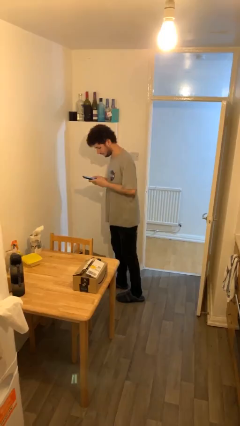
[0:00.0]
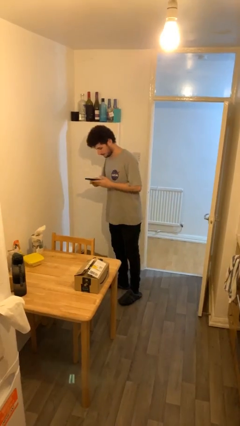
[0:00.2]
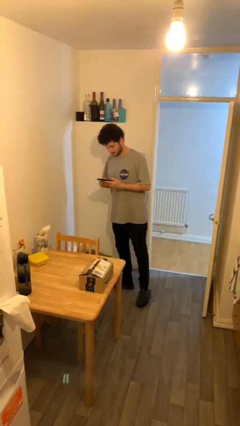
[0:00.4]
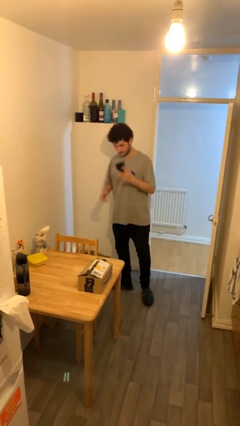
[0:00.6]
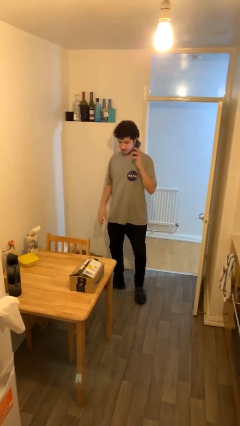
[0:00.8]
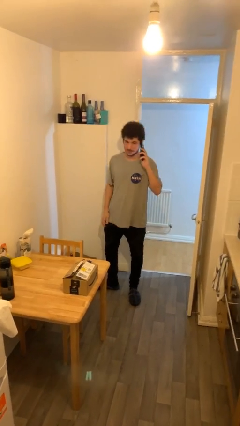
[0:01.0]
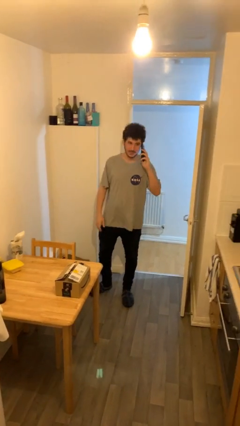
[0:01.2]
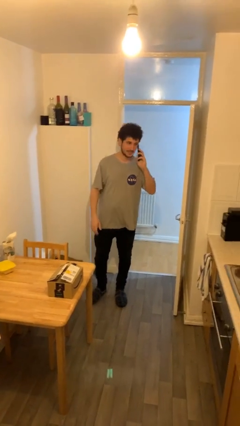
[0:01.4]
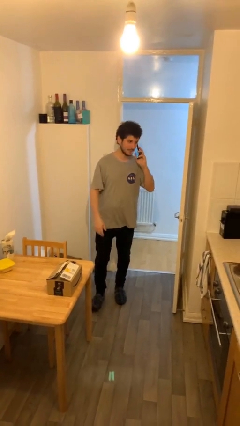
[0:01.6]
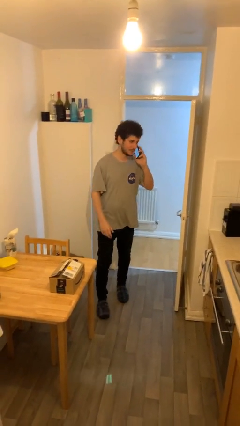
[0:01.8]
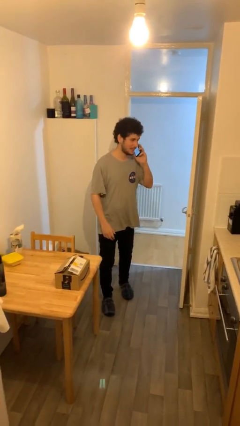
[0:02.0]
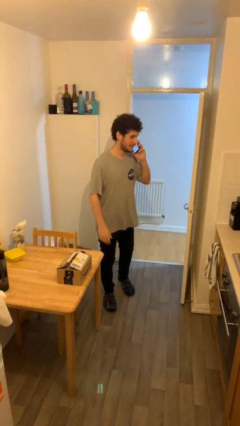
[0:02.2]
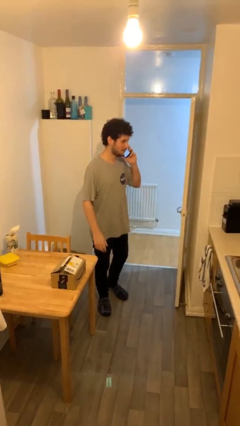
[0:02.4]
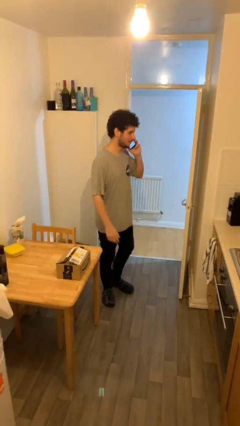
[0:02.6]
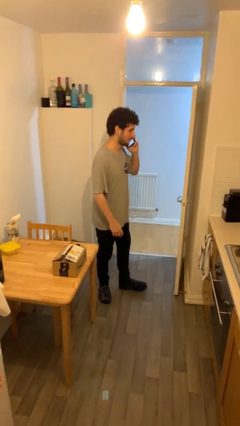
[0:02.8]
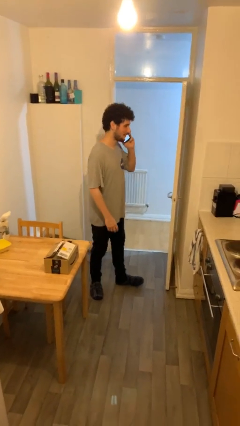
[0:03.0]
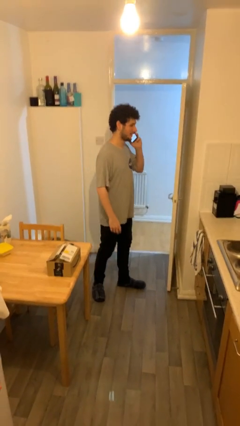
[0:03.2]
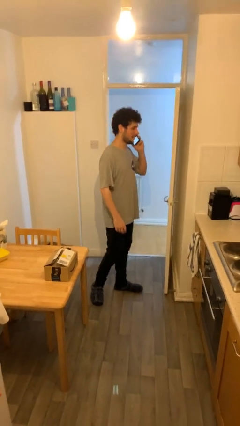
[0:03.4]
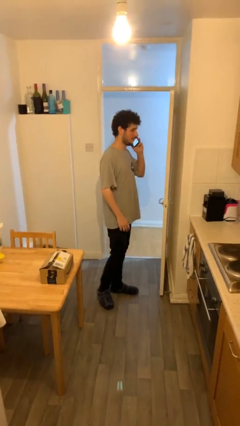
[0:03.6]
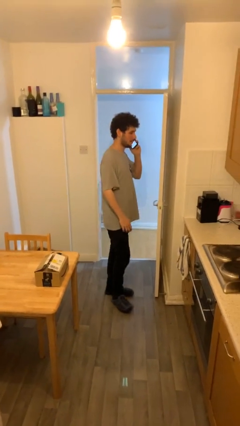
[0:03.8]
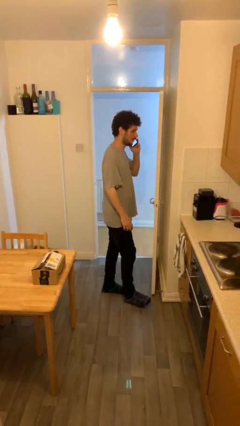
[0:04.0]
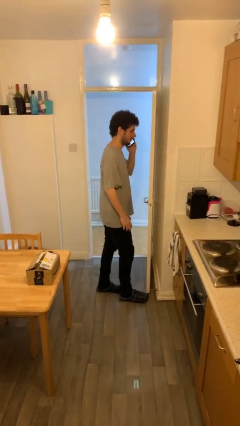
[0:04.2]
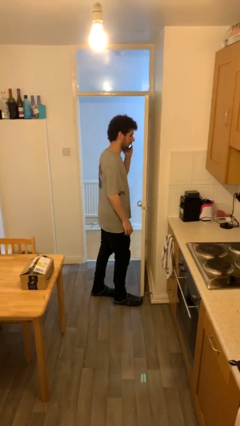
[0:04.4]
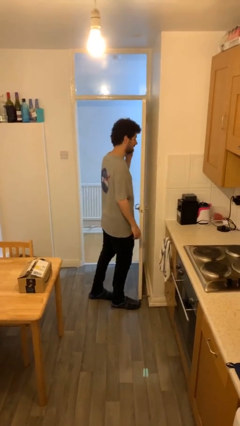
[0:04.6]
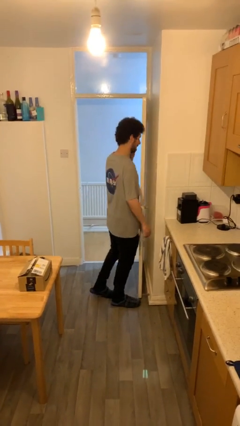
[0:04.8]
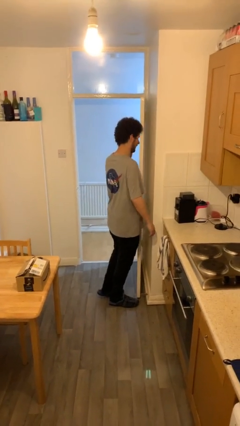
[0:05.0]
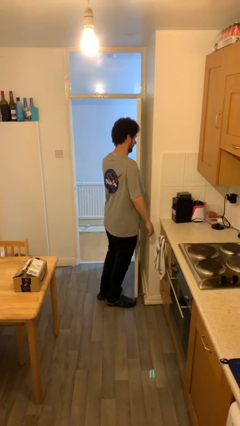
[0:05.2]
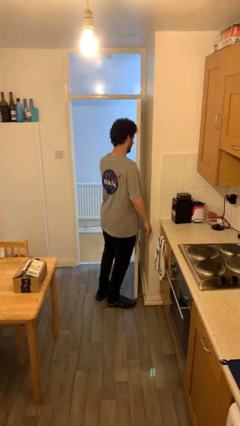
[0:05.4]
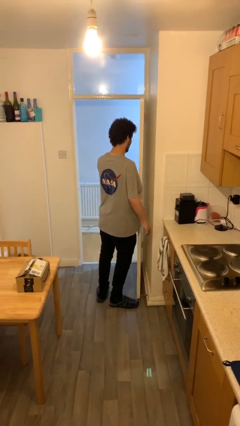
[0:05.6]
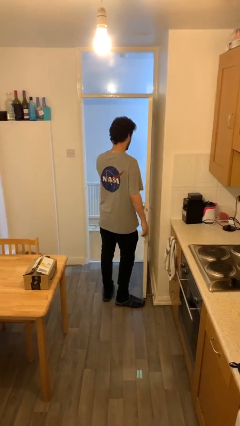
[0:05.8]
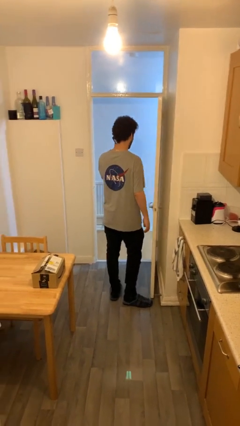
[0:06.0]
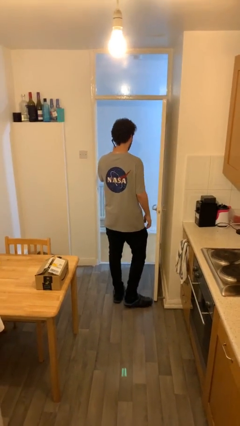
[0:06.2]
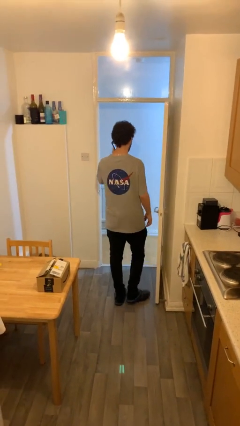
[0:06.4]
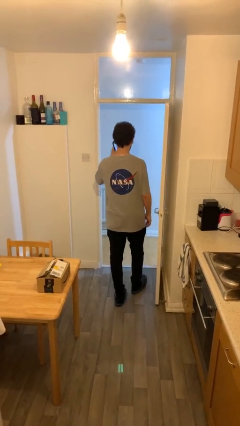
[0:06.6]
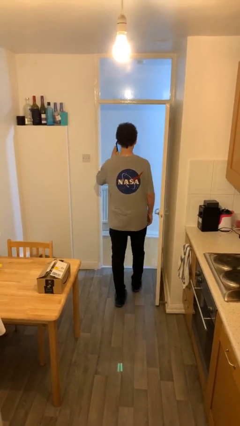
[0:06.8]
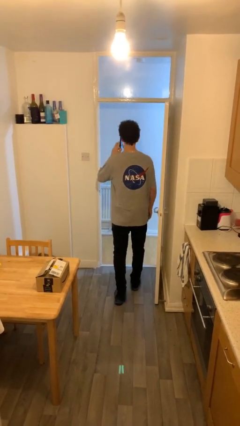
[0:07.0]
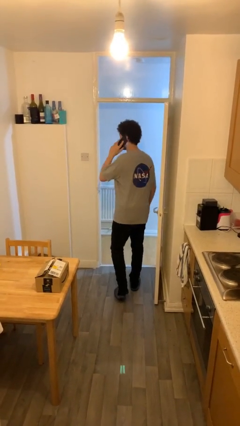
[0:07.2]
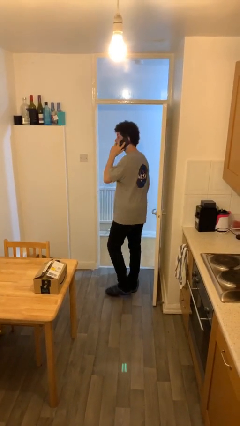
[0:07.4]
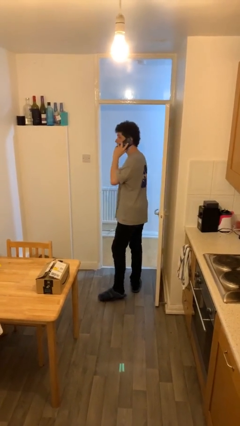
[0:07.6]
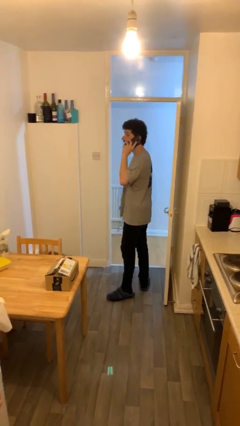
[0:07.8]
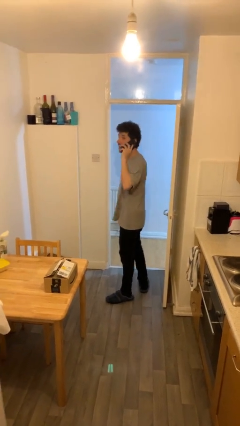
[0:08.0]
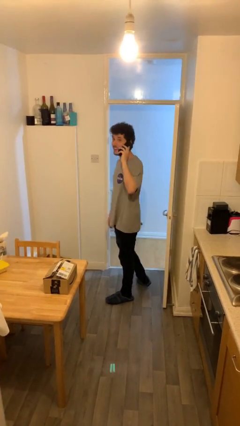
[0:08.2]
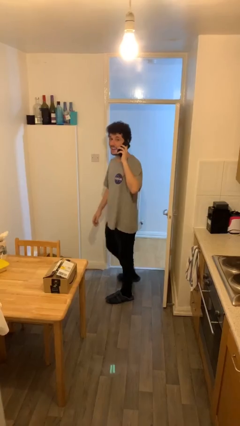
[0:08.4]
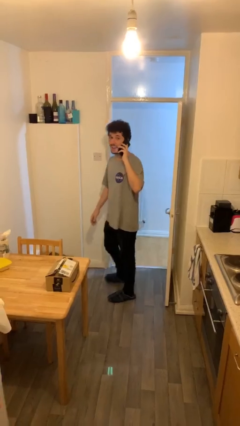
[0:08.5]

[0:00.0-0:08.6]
person talks on phone

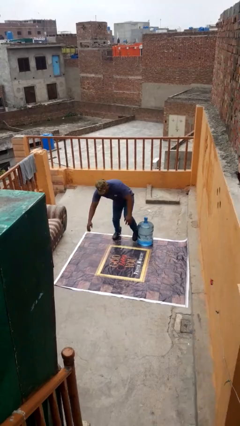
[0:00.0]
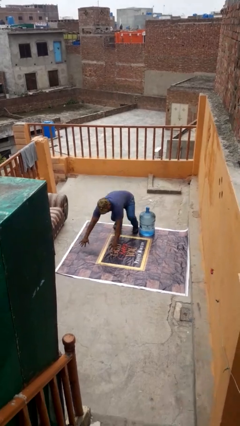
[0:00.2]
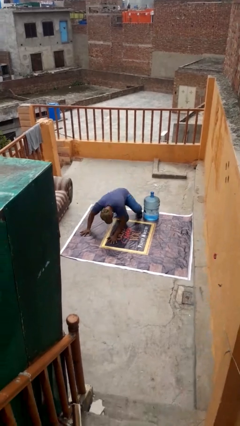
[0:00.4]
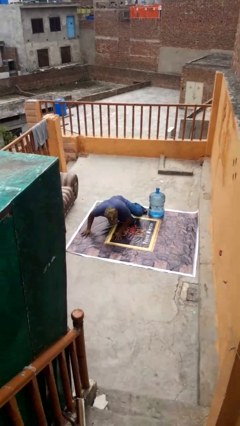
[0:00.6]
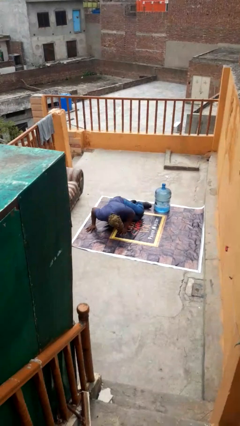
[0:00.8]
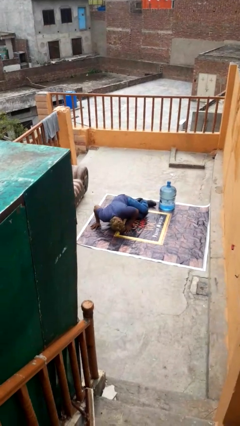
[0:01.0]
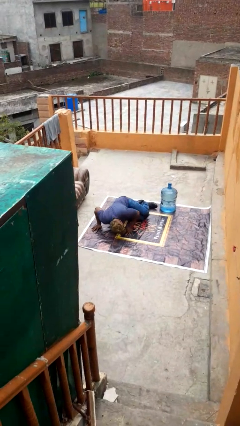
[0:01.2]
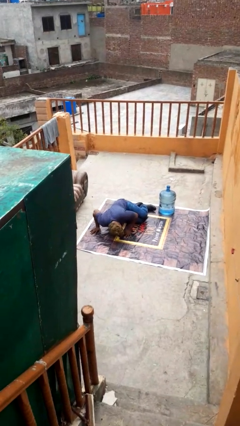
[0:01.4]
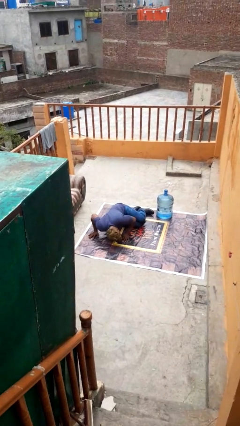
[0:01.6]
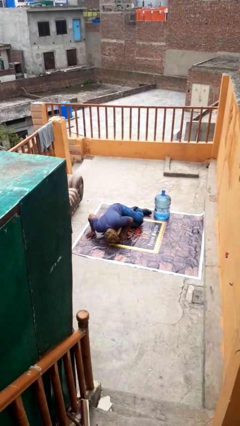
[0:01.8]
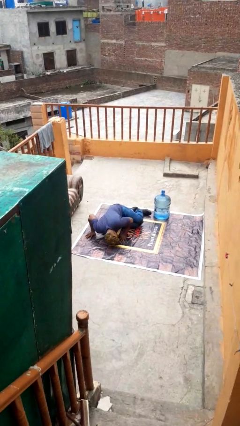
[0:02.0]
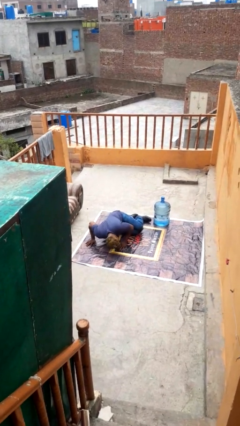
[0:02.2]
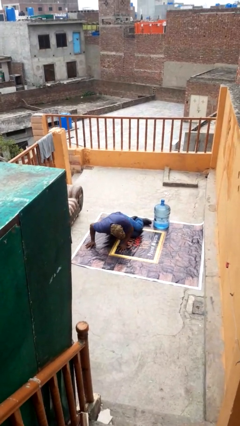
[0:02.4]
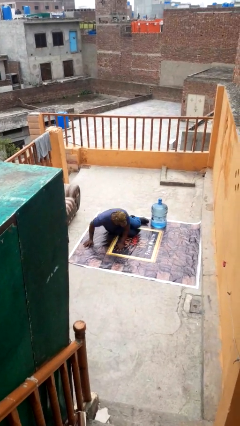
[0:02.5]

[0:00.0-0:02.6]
person lies down on floor

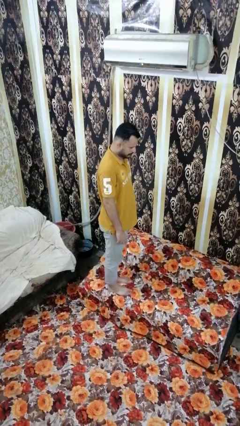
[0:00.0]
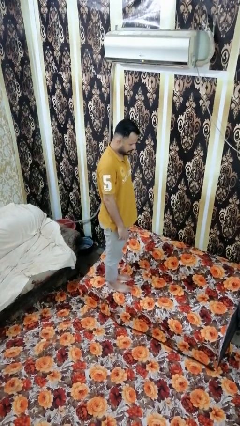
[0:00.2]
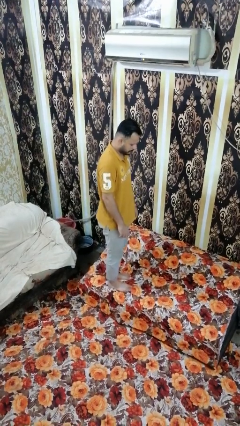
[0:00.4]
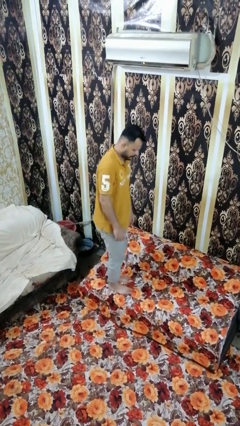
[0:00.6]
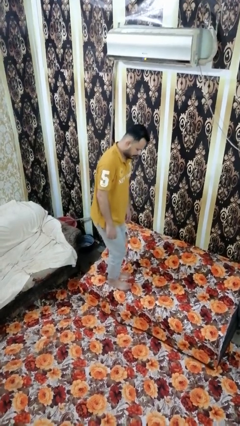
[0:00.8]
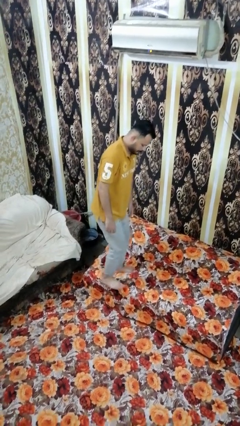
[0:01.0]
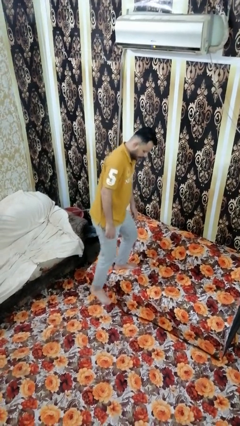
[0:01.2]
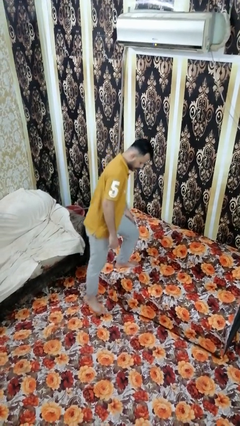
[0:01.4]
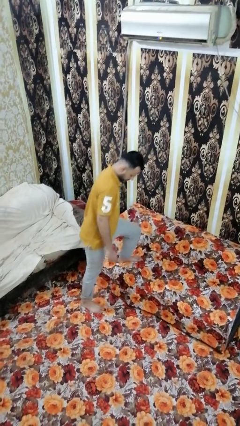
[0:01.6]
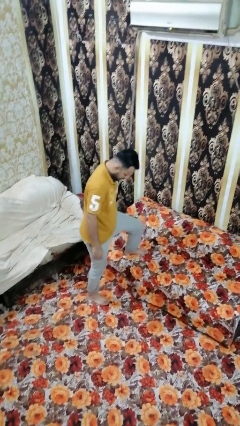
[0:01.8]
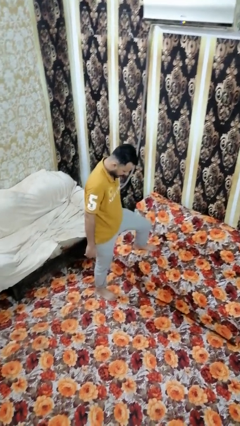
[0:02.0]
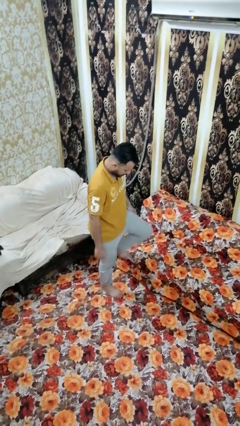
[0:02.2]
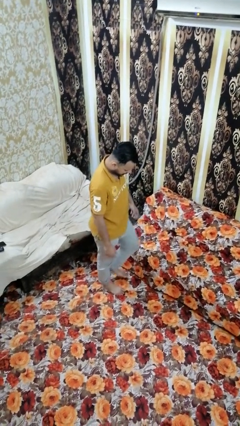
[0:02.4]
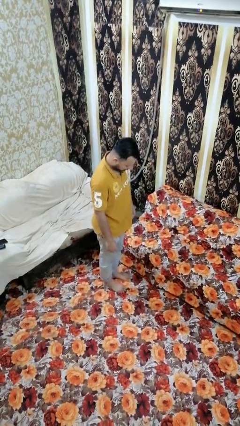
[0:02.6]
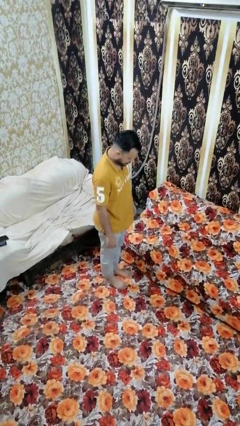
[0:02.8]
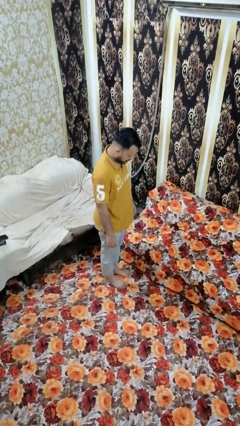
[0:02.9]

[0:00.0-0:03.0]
person climbs off couch

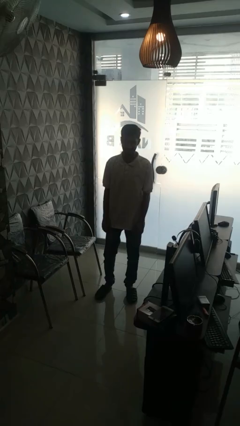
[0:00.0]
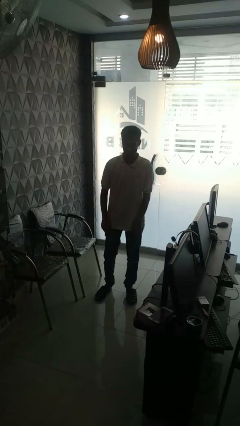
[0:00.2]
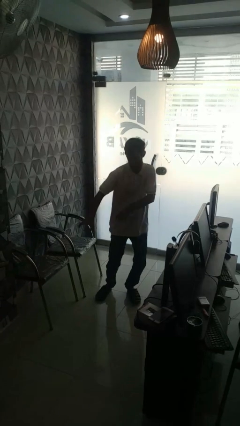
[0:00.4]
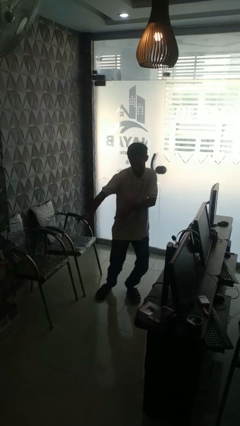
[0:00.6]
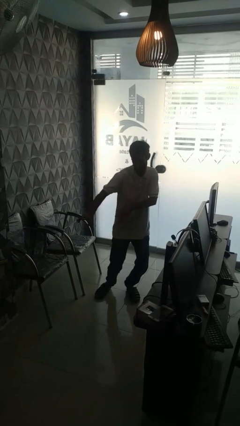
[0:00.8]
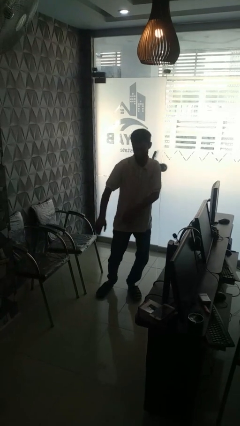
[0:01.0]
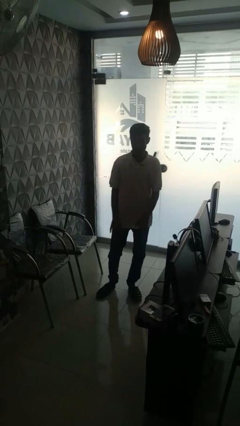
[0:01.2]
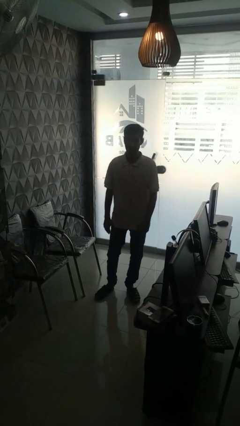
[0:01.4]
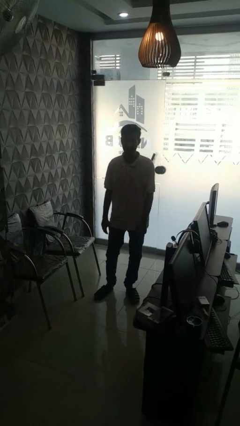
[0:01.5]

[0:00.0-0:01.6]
person dances in place

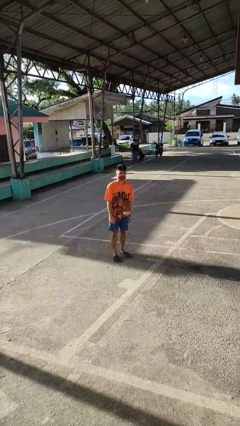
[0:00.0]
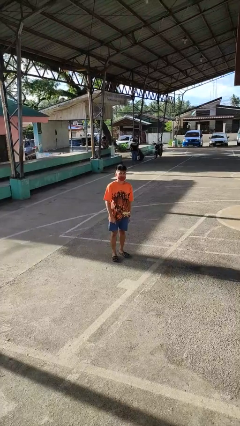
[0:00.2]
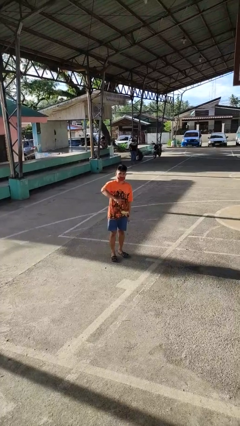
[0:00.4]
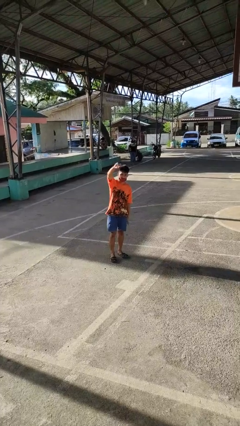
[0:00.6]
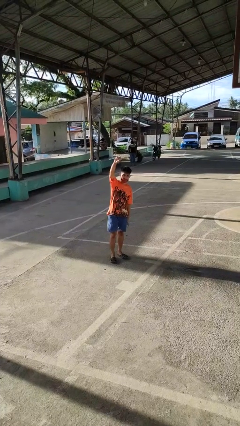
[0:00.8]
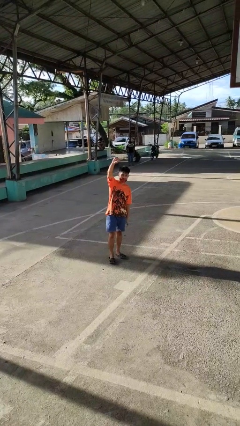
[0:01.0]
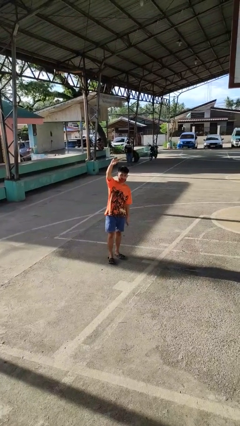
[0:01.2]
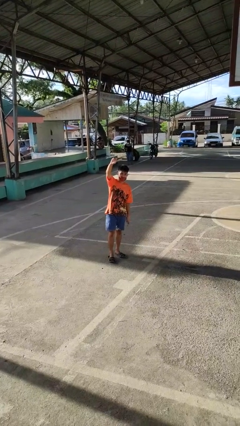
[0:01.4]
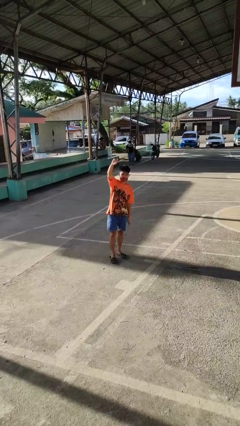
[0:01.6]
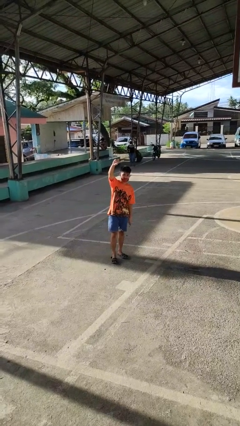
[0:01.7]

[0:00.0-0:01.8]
person gestures swipe up
